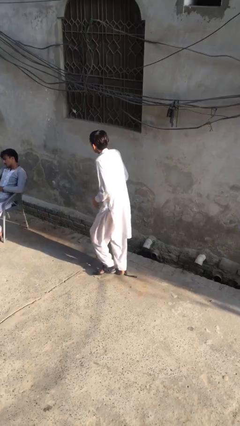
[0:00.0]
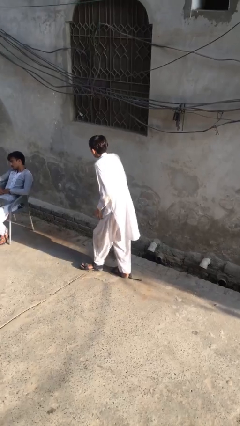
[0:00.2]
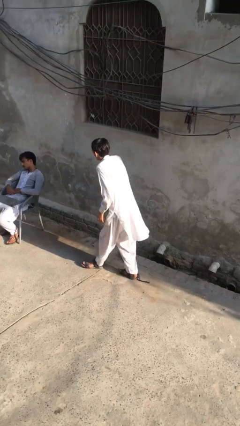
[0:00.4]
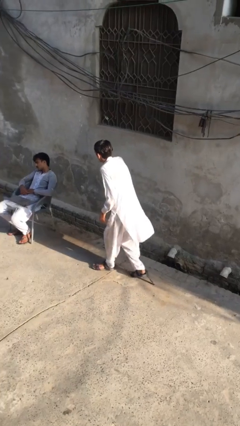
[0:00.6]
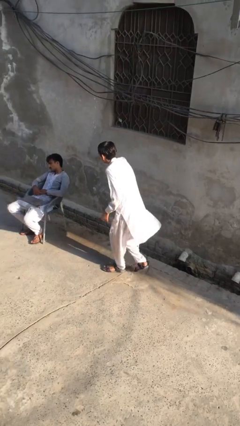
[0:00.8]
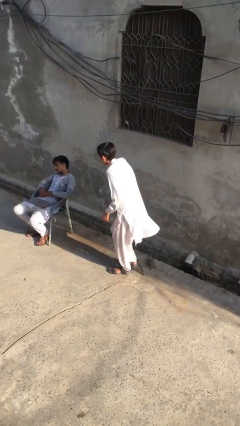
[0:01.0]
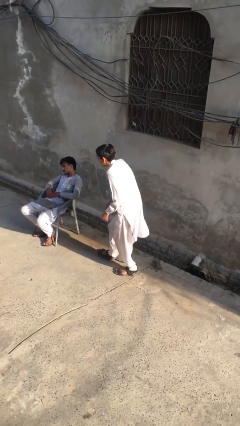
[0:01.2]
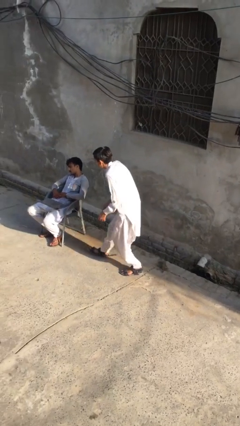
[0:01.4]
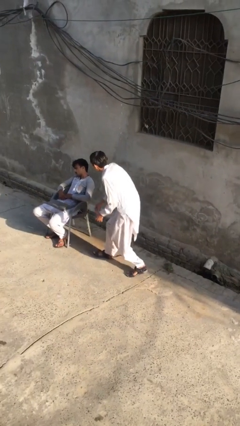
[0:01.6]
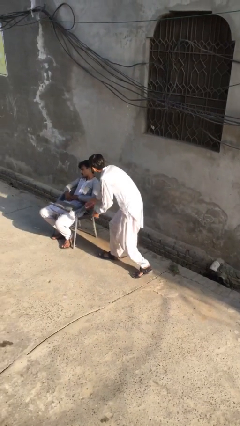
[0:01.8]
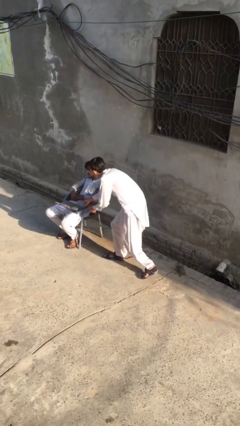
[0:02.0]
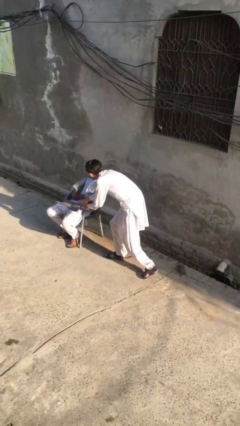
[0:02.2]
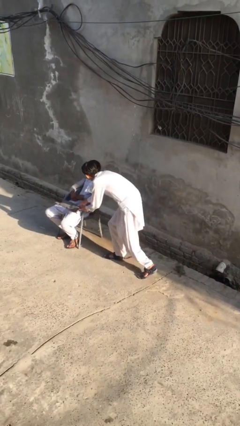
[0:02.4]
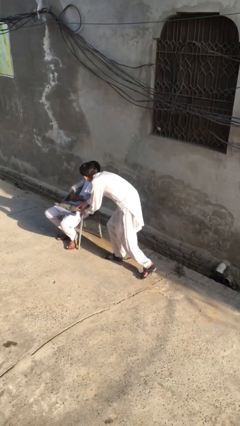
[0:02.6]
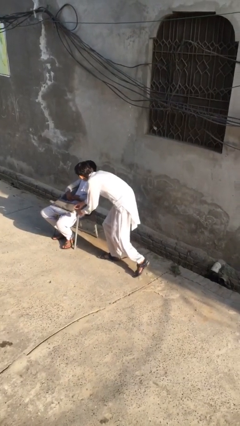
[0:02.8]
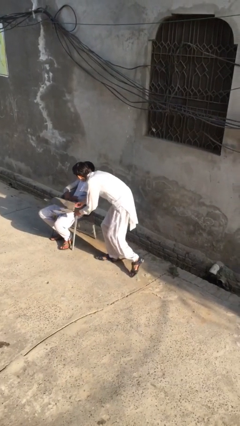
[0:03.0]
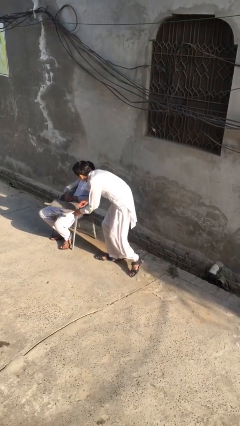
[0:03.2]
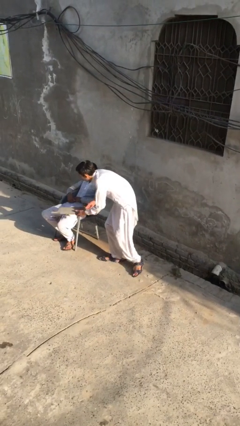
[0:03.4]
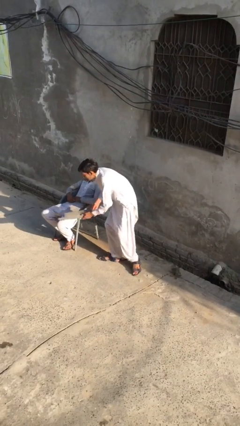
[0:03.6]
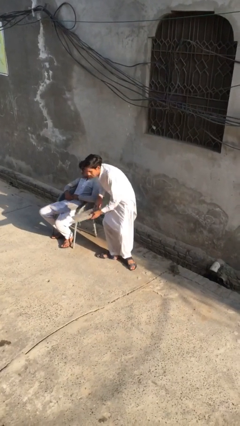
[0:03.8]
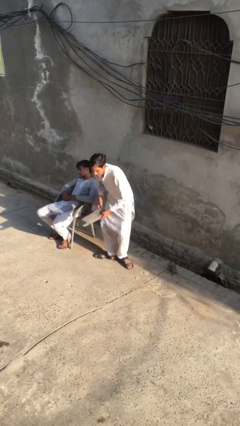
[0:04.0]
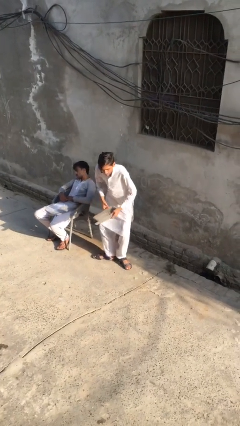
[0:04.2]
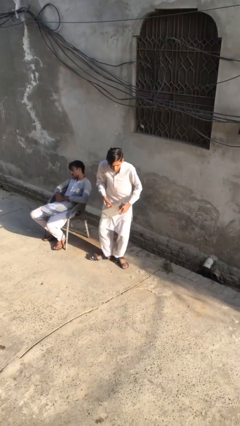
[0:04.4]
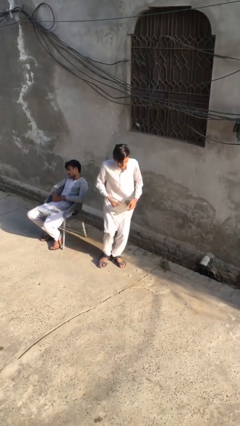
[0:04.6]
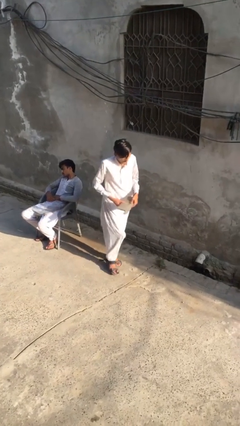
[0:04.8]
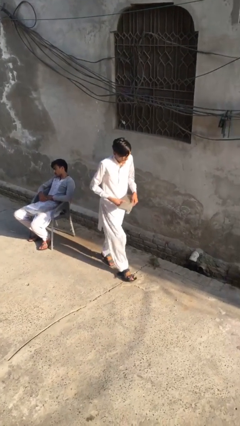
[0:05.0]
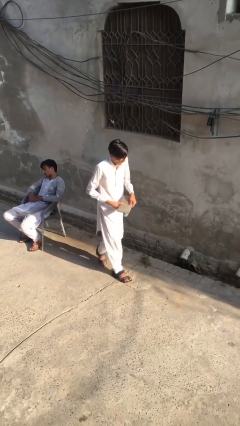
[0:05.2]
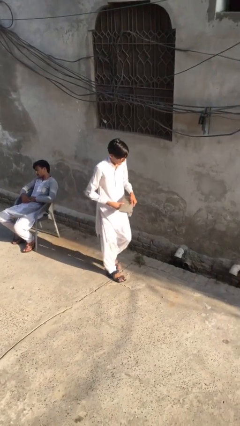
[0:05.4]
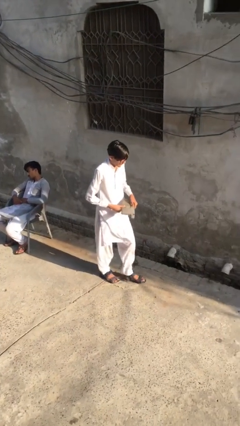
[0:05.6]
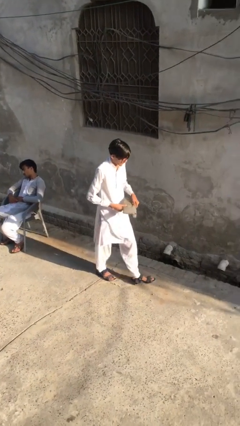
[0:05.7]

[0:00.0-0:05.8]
person steals object from person

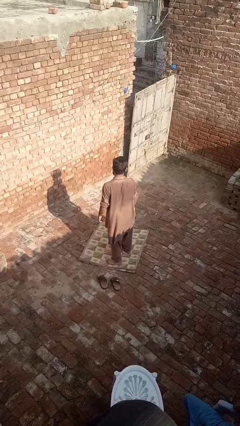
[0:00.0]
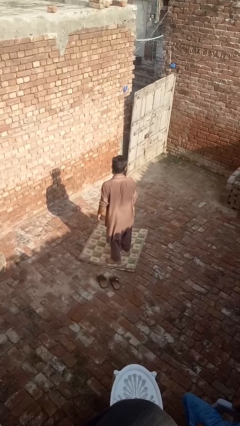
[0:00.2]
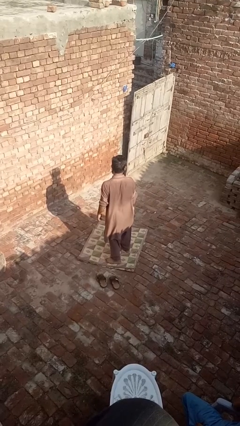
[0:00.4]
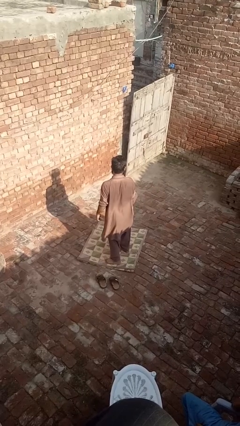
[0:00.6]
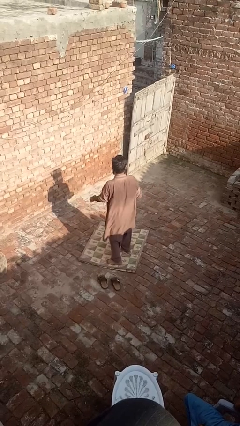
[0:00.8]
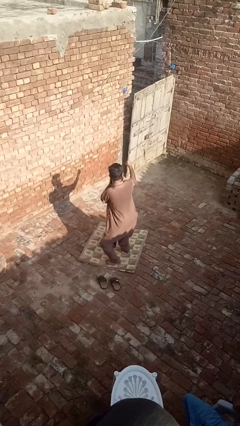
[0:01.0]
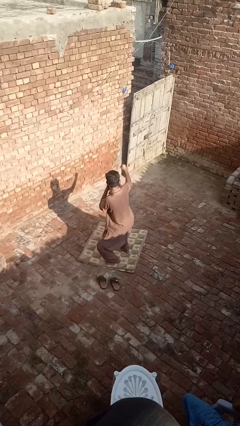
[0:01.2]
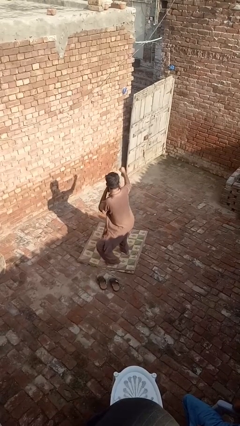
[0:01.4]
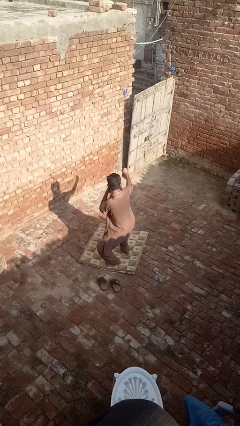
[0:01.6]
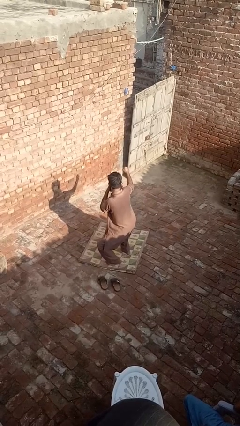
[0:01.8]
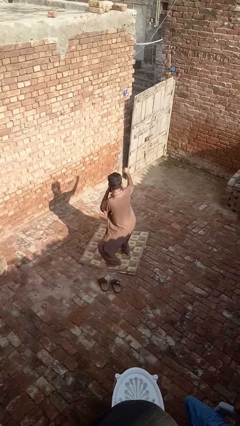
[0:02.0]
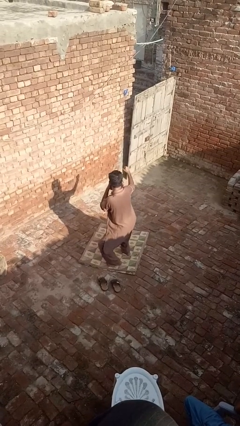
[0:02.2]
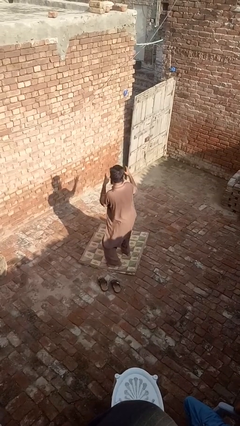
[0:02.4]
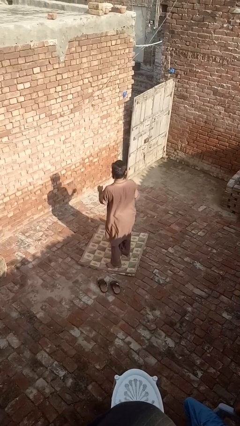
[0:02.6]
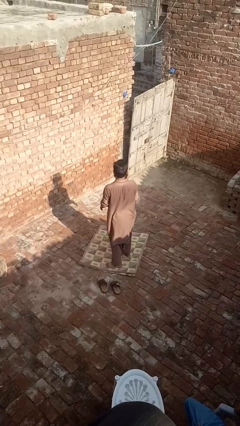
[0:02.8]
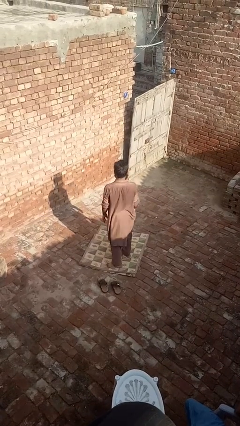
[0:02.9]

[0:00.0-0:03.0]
person karate chop

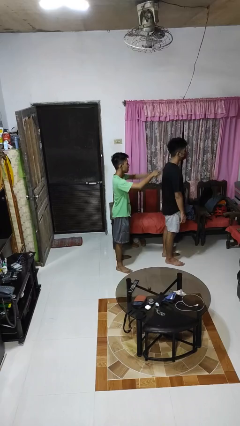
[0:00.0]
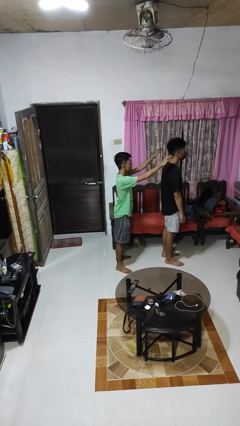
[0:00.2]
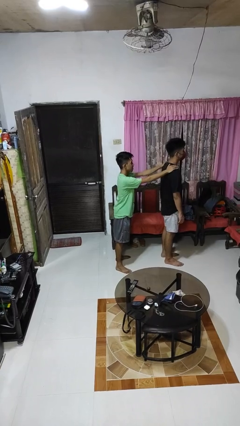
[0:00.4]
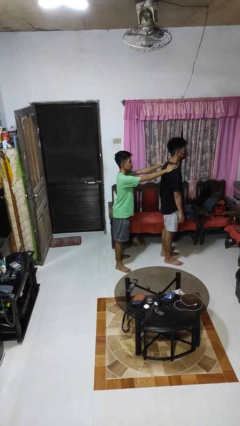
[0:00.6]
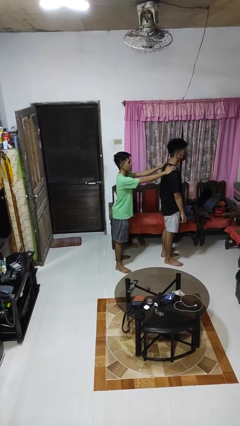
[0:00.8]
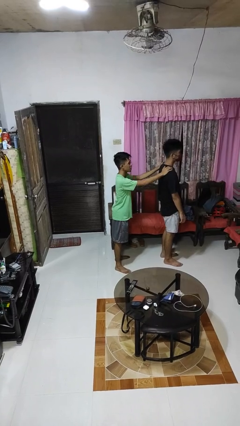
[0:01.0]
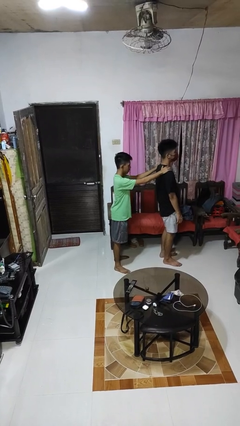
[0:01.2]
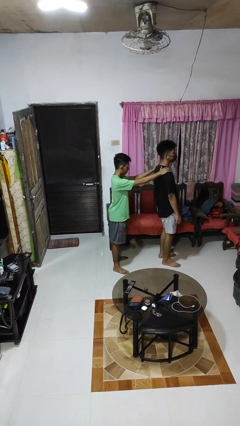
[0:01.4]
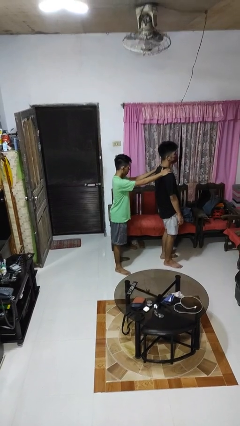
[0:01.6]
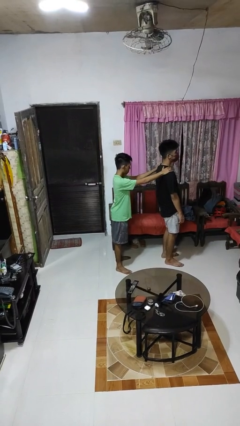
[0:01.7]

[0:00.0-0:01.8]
person grabs person by shoulder

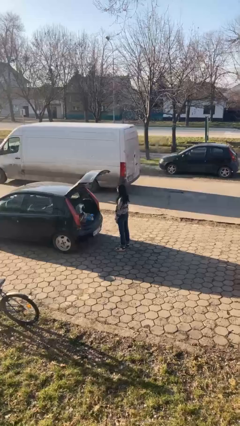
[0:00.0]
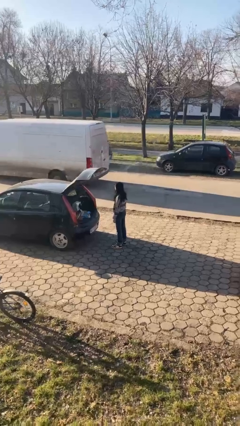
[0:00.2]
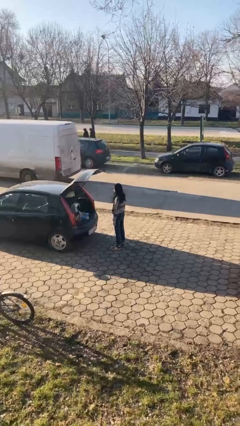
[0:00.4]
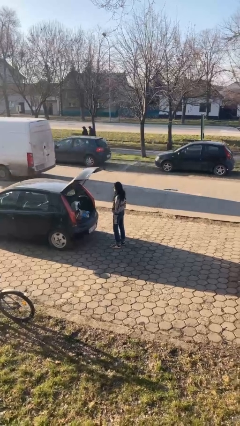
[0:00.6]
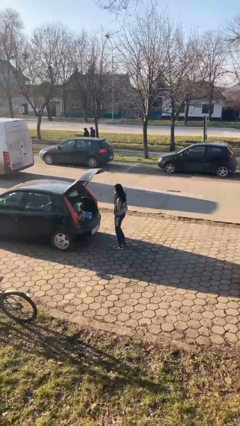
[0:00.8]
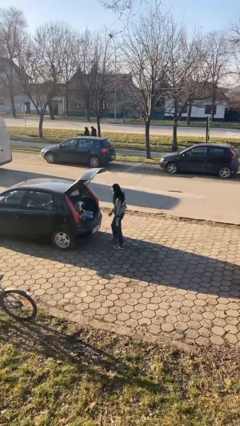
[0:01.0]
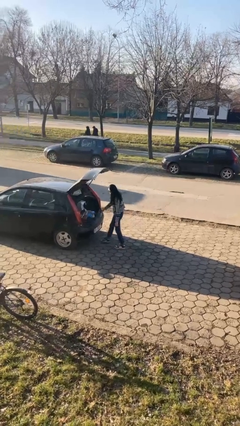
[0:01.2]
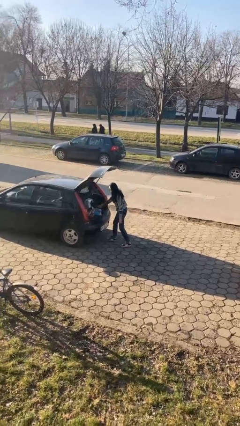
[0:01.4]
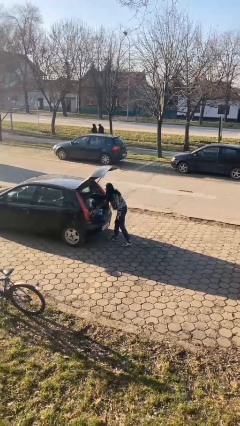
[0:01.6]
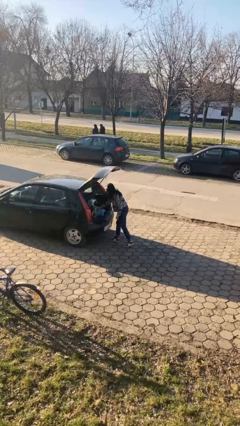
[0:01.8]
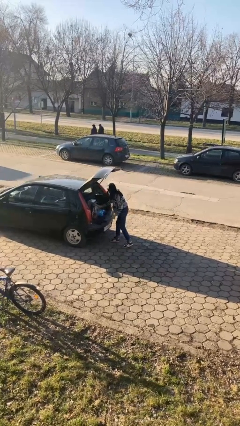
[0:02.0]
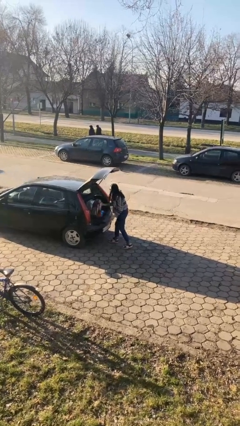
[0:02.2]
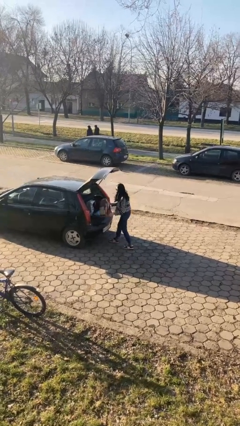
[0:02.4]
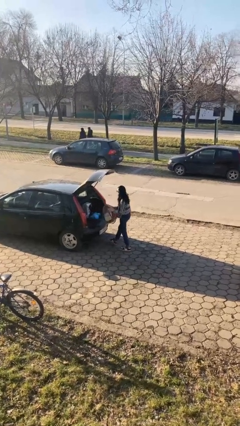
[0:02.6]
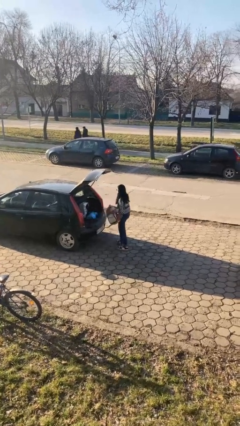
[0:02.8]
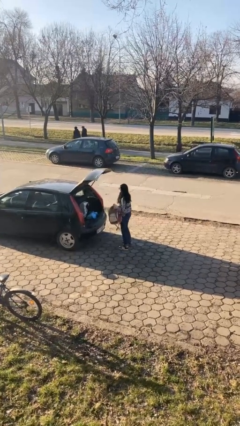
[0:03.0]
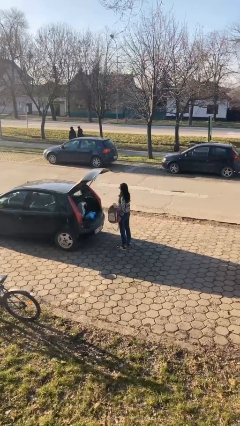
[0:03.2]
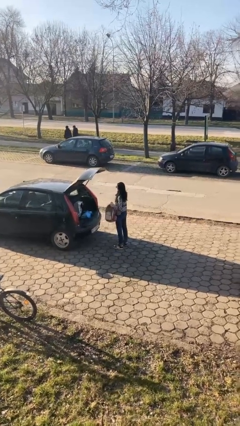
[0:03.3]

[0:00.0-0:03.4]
person unloads car

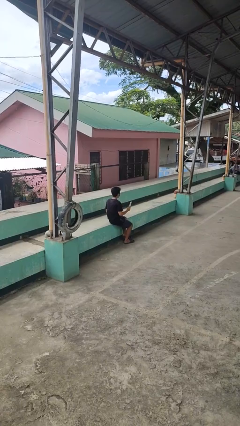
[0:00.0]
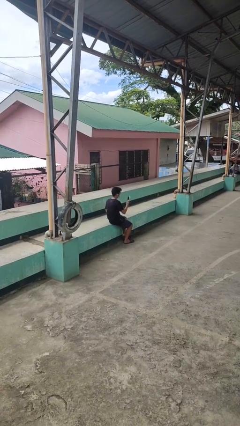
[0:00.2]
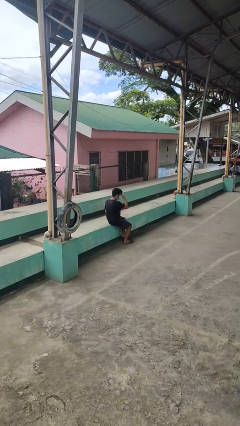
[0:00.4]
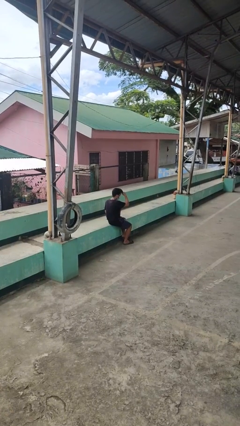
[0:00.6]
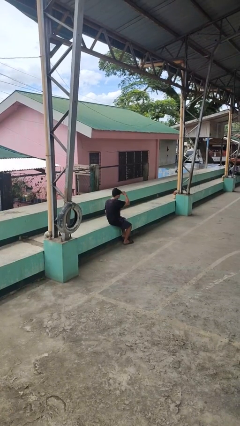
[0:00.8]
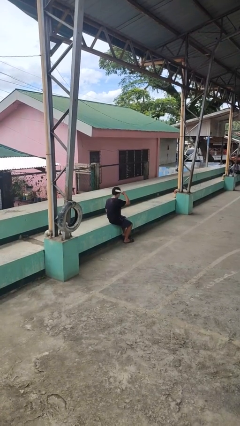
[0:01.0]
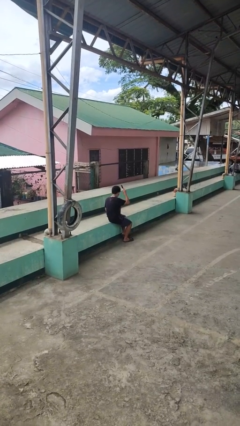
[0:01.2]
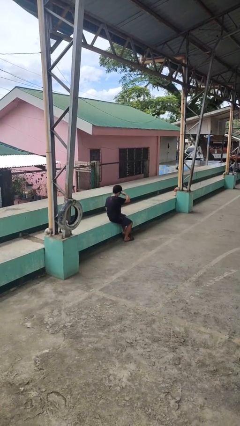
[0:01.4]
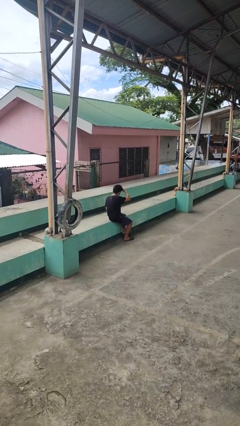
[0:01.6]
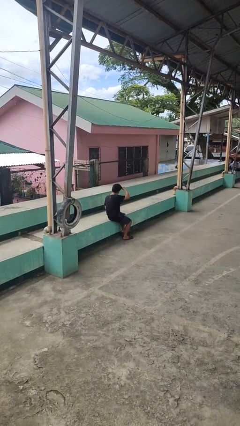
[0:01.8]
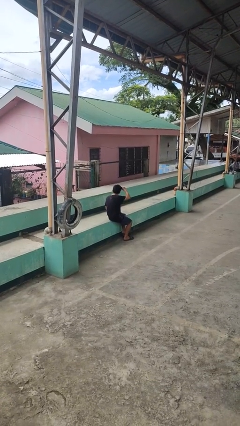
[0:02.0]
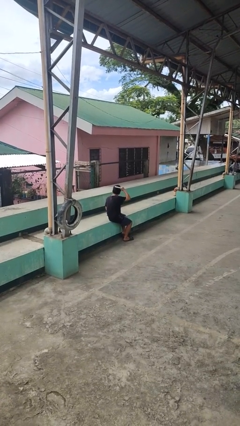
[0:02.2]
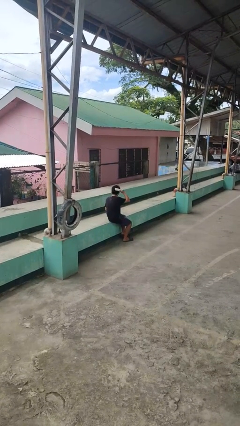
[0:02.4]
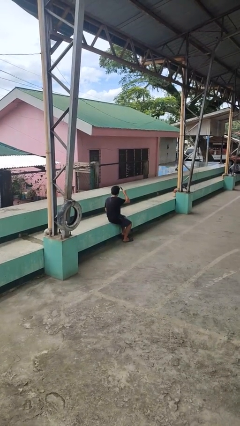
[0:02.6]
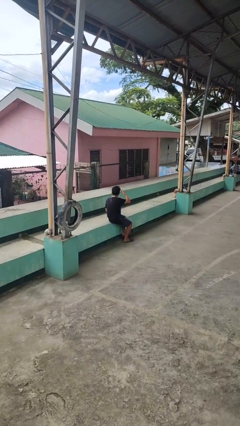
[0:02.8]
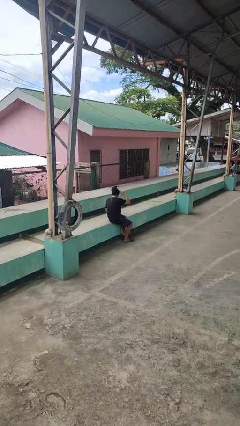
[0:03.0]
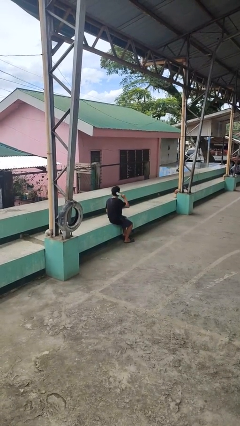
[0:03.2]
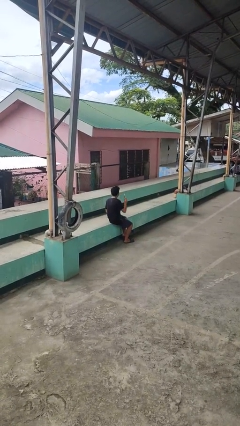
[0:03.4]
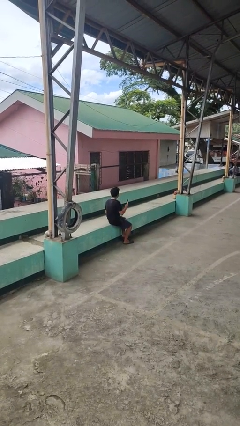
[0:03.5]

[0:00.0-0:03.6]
person brushes hair
